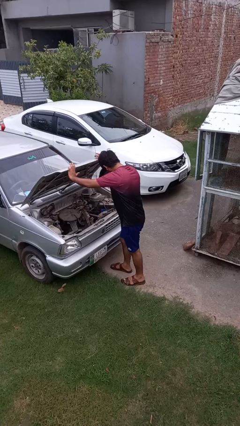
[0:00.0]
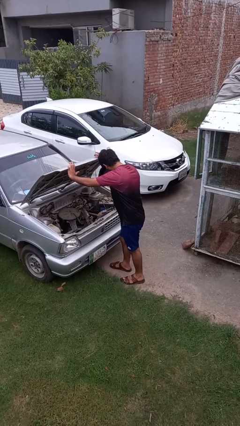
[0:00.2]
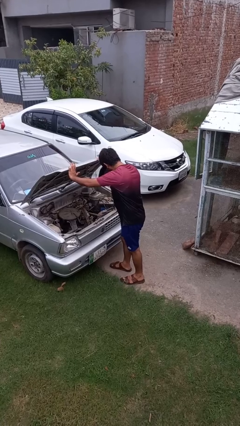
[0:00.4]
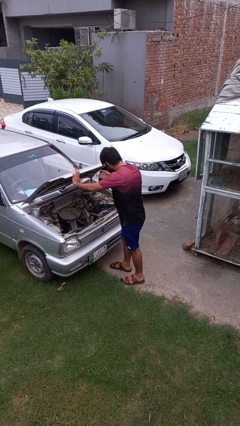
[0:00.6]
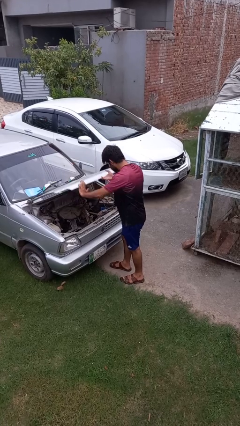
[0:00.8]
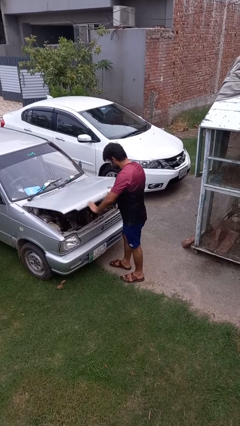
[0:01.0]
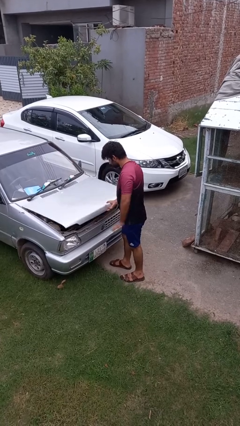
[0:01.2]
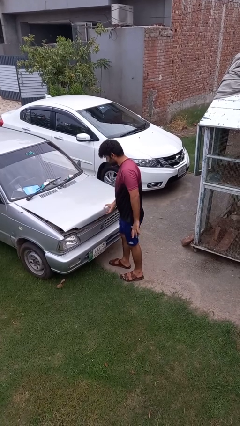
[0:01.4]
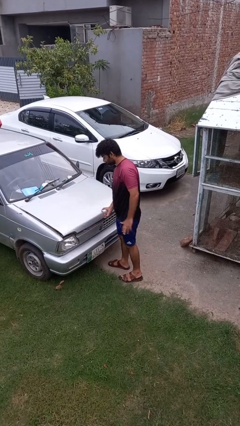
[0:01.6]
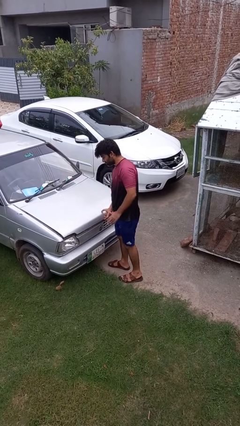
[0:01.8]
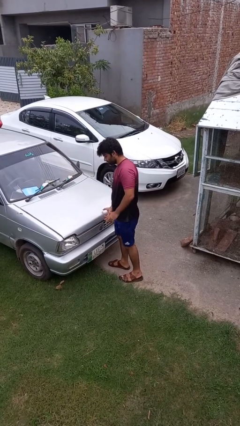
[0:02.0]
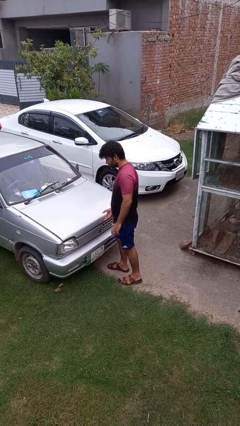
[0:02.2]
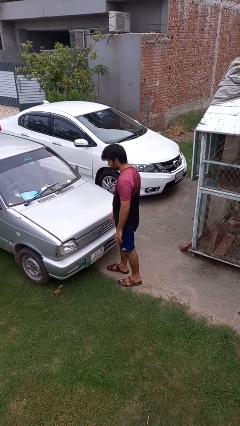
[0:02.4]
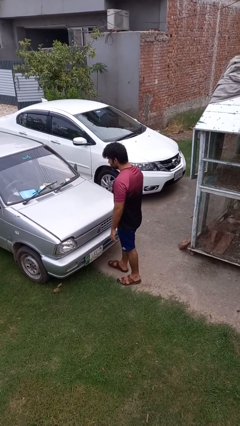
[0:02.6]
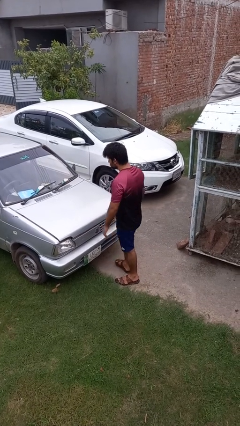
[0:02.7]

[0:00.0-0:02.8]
person closes car hood

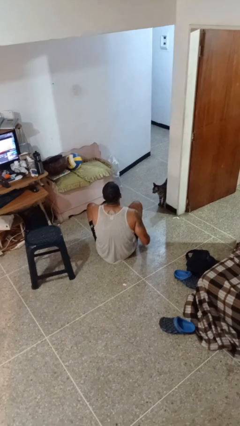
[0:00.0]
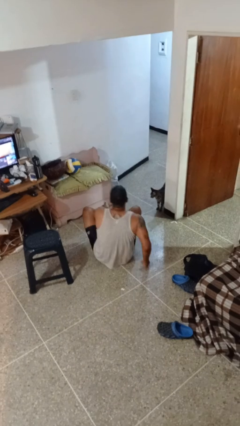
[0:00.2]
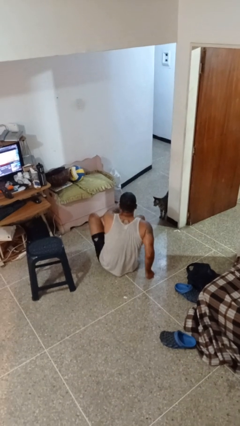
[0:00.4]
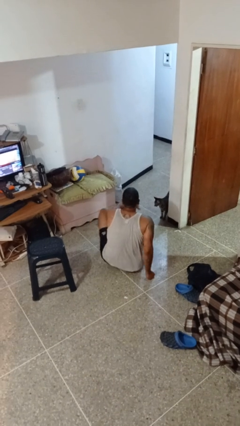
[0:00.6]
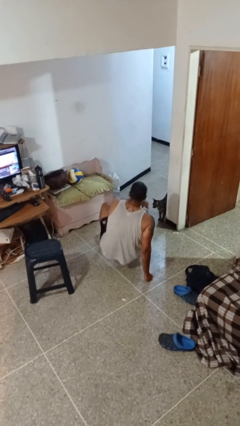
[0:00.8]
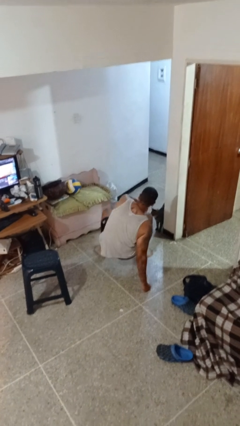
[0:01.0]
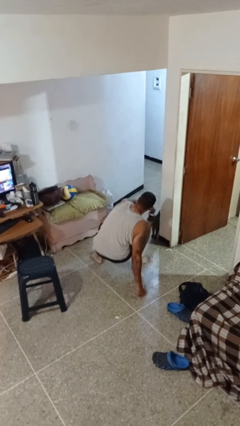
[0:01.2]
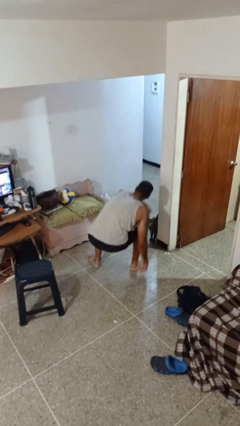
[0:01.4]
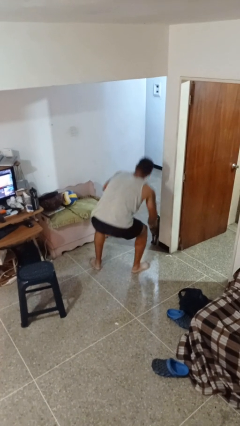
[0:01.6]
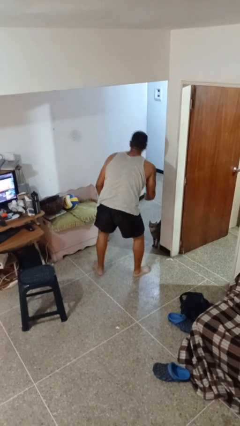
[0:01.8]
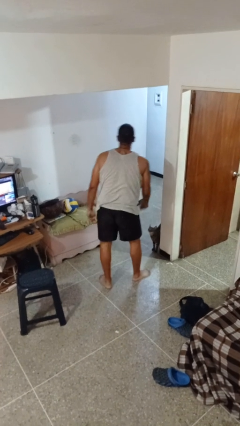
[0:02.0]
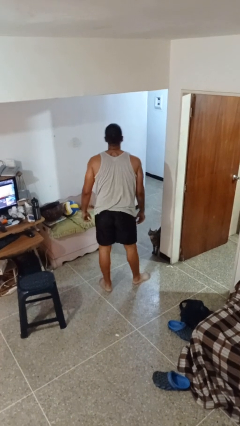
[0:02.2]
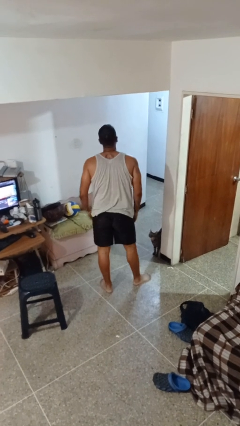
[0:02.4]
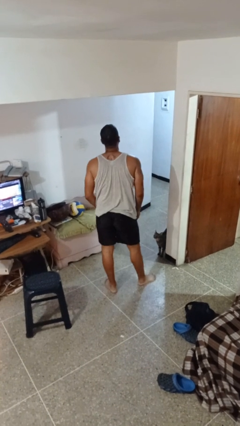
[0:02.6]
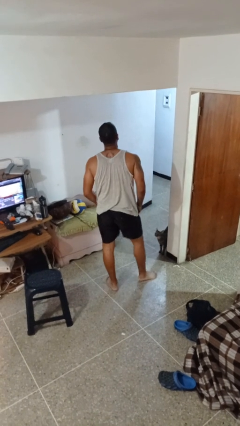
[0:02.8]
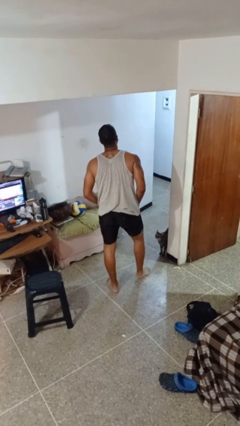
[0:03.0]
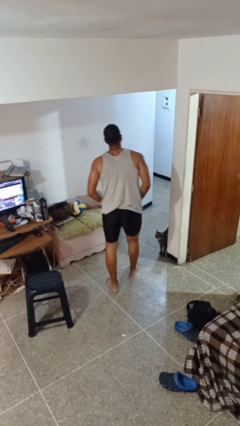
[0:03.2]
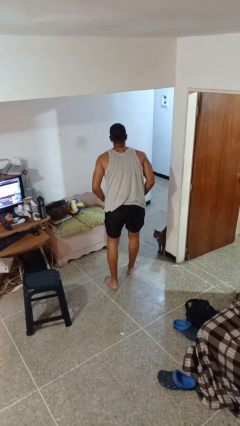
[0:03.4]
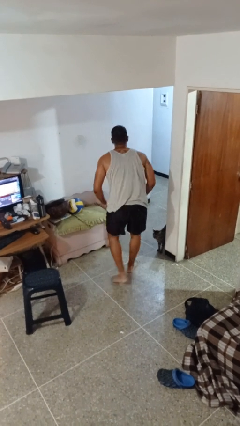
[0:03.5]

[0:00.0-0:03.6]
person stands up from floor

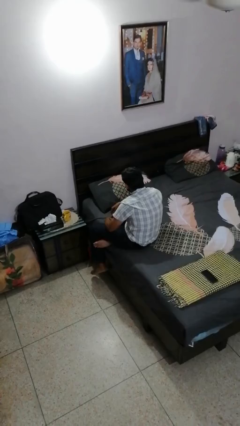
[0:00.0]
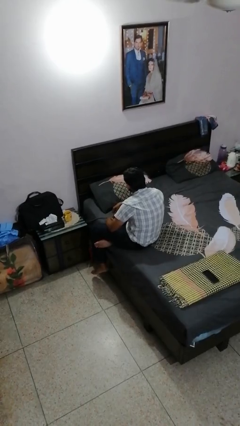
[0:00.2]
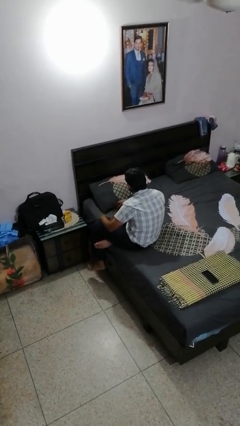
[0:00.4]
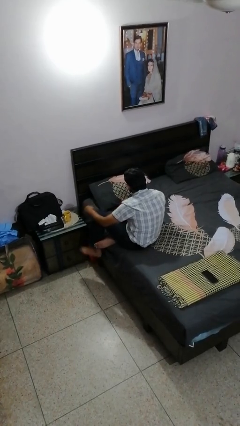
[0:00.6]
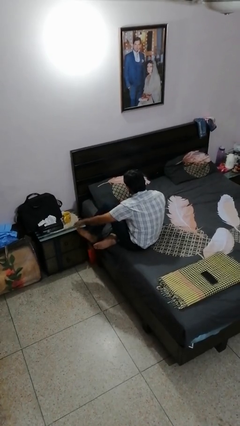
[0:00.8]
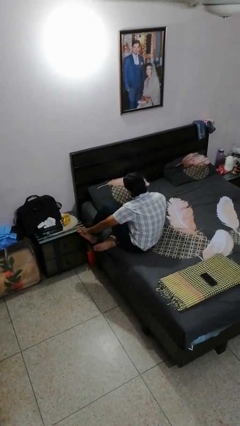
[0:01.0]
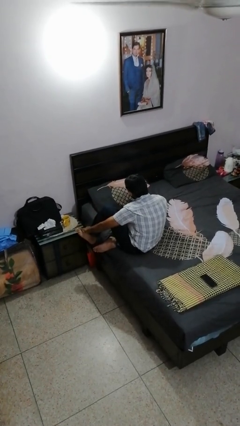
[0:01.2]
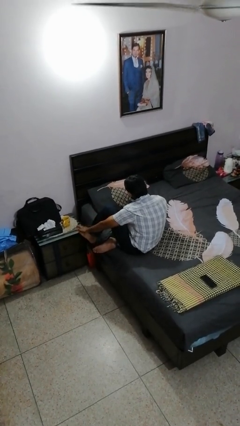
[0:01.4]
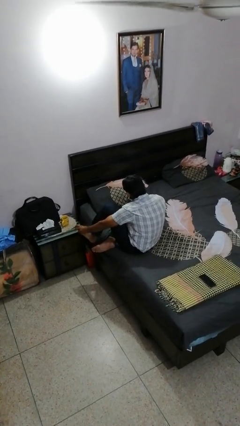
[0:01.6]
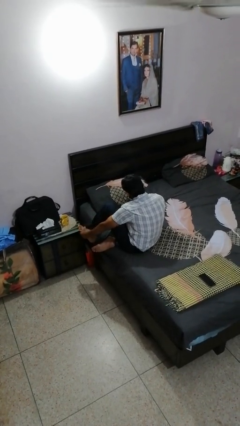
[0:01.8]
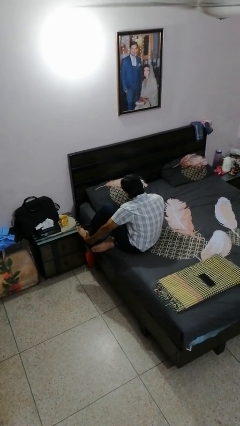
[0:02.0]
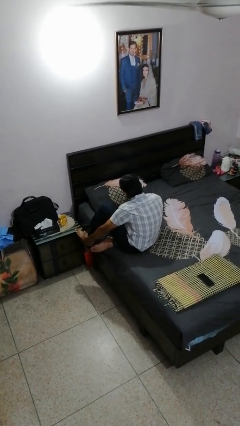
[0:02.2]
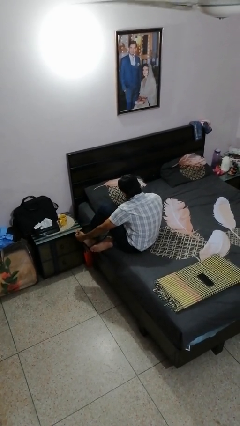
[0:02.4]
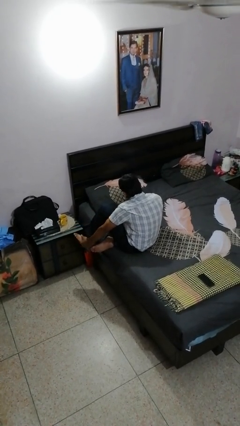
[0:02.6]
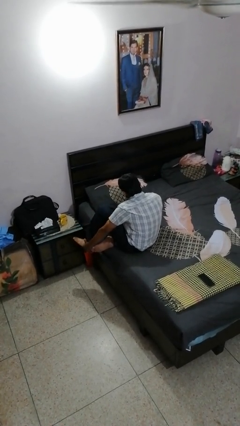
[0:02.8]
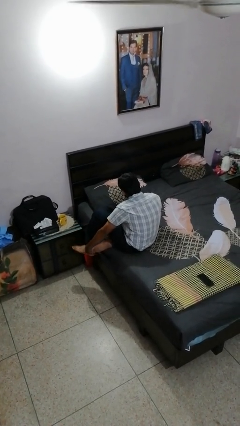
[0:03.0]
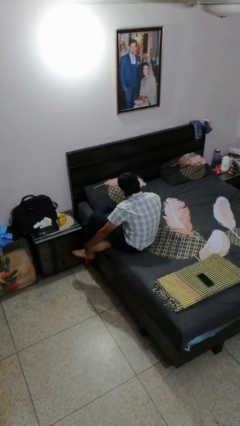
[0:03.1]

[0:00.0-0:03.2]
person rubs foot

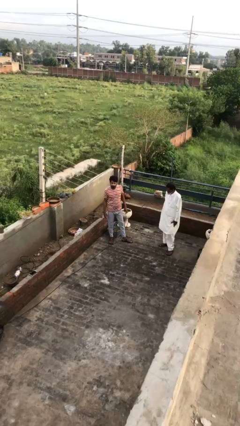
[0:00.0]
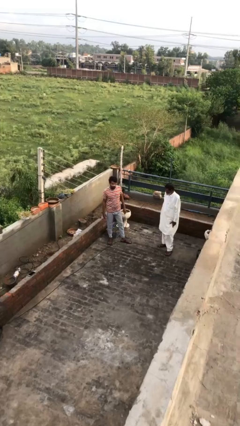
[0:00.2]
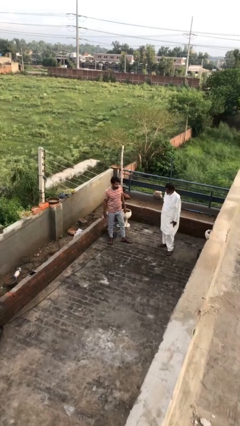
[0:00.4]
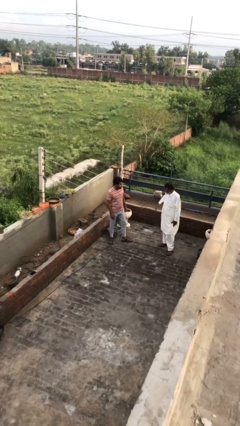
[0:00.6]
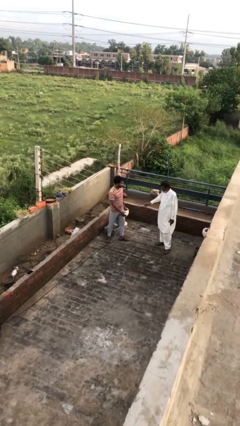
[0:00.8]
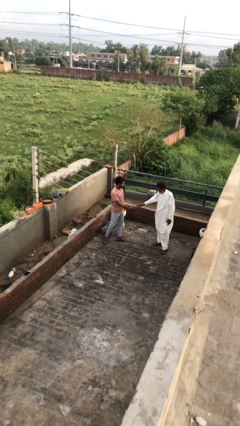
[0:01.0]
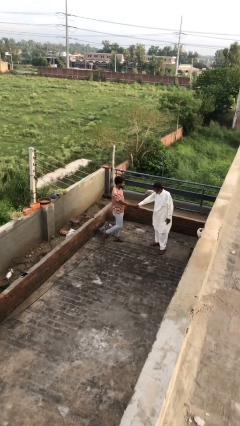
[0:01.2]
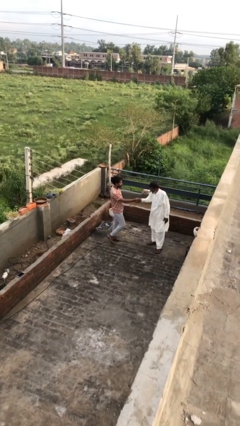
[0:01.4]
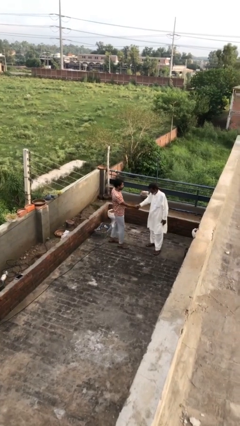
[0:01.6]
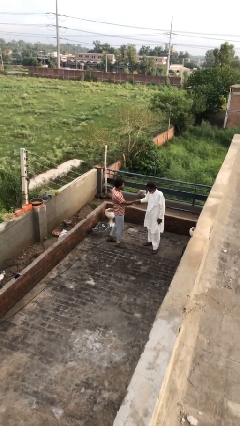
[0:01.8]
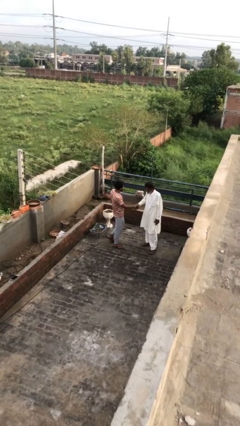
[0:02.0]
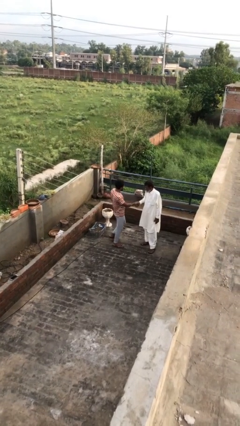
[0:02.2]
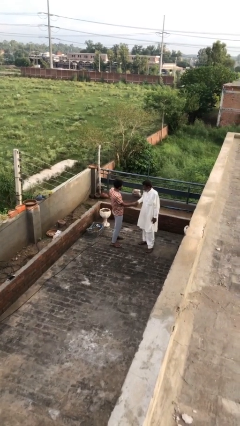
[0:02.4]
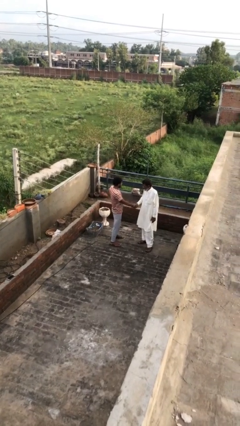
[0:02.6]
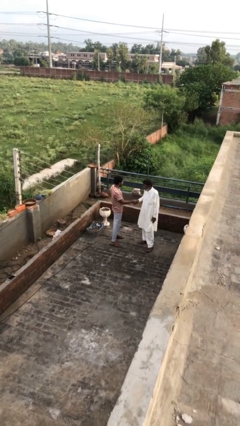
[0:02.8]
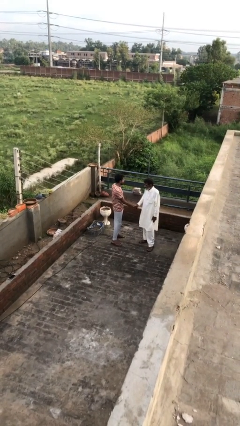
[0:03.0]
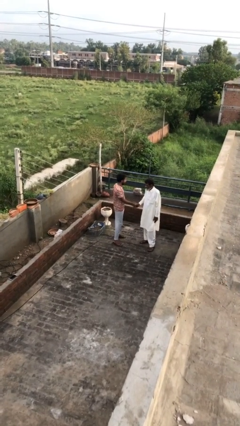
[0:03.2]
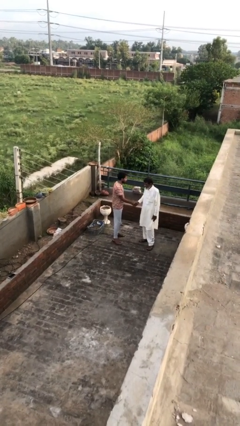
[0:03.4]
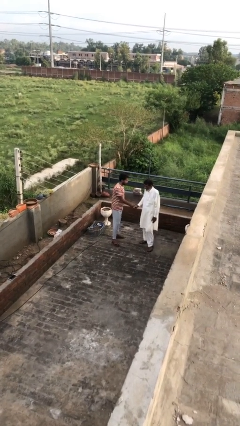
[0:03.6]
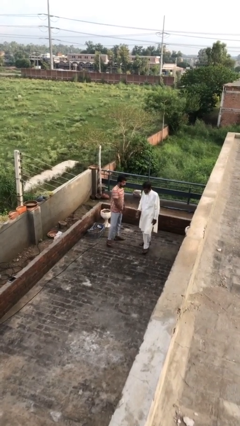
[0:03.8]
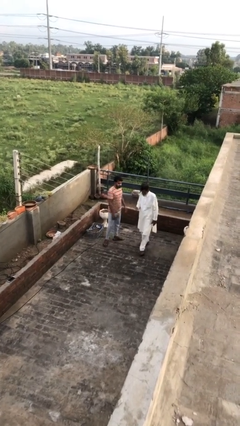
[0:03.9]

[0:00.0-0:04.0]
person shakes hand

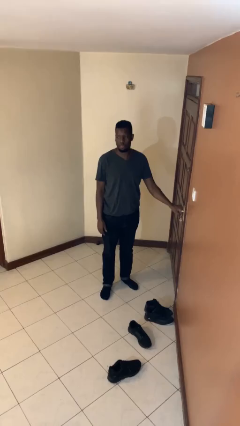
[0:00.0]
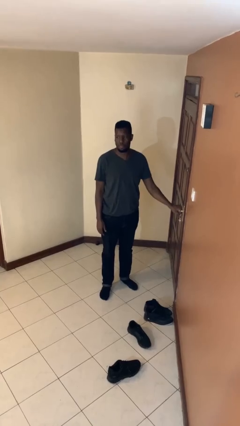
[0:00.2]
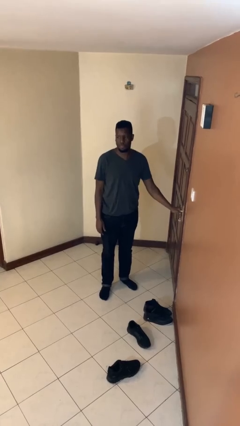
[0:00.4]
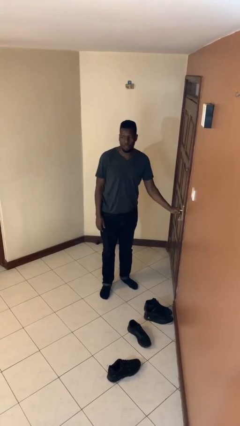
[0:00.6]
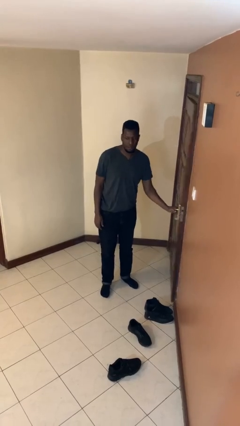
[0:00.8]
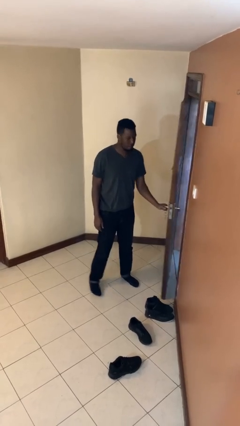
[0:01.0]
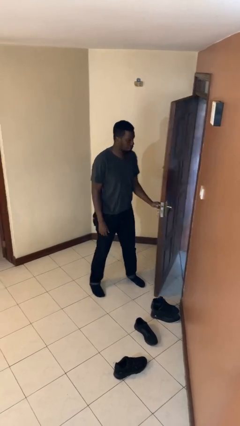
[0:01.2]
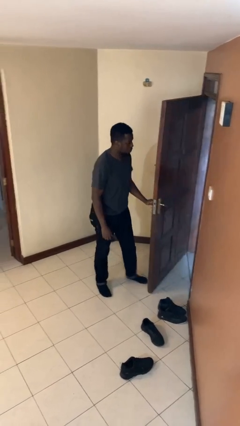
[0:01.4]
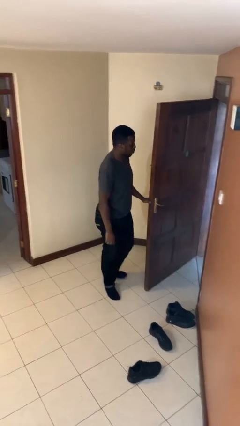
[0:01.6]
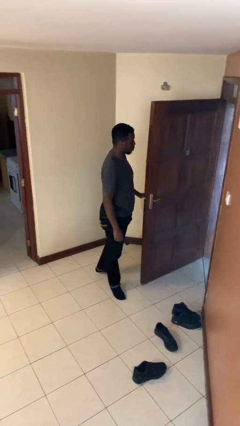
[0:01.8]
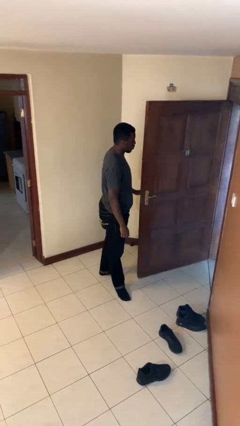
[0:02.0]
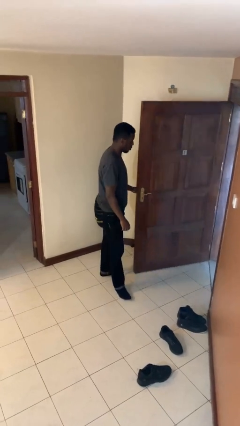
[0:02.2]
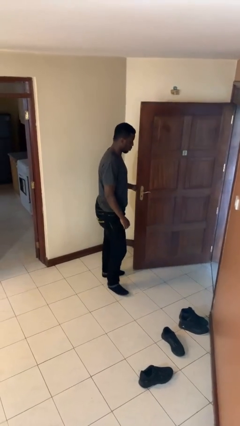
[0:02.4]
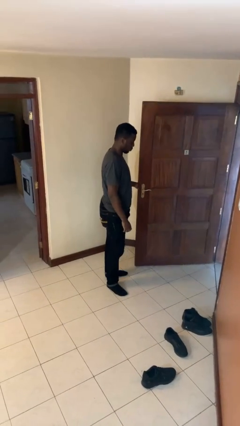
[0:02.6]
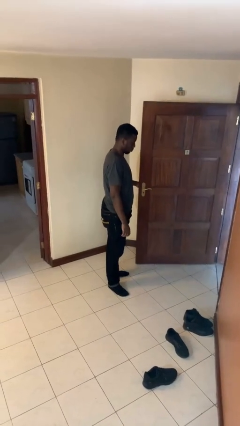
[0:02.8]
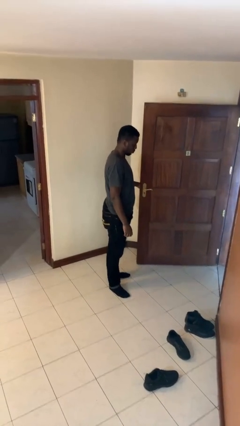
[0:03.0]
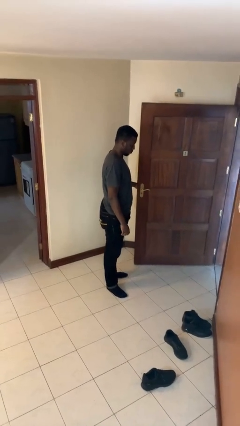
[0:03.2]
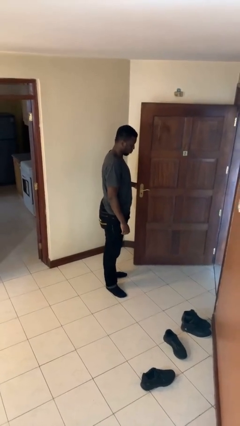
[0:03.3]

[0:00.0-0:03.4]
person opens facility door

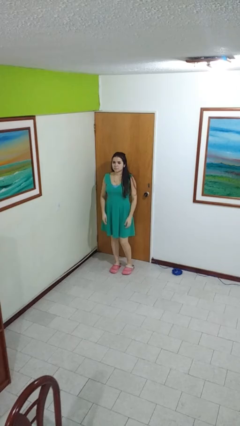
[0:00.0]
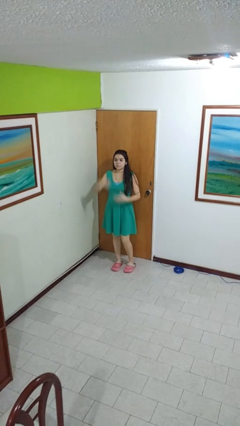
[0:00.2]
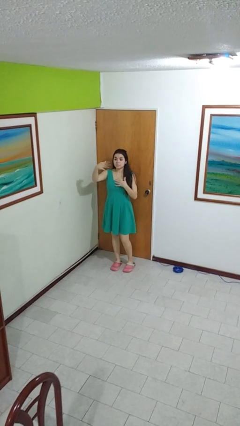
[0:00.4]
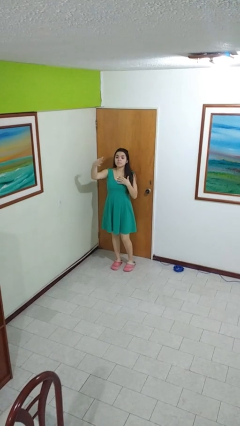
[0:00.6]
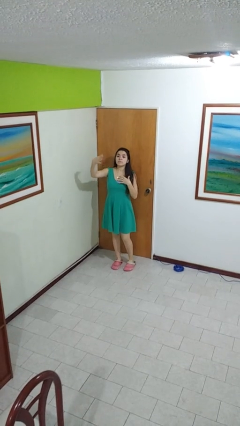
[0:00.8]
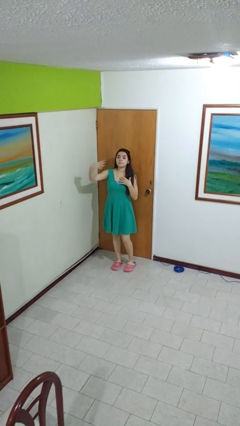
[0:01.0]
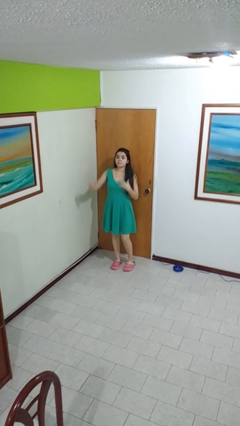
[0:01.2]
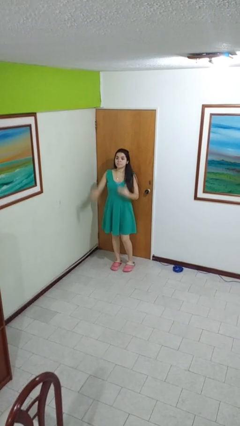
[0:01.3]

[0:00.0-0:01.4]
person gestures come here
